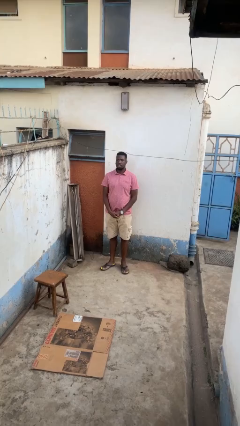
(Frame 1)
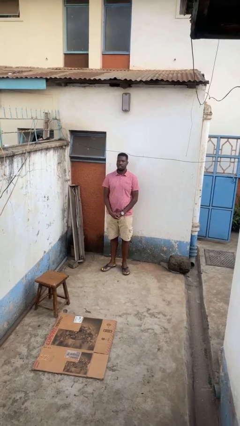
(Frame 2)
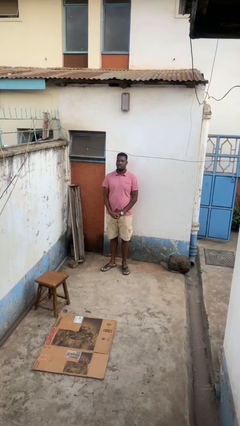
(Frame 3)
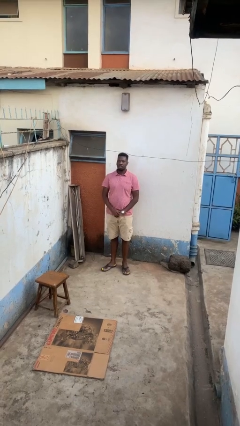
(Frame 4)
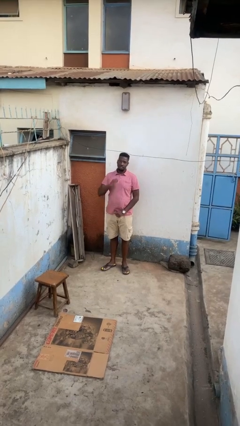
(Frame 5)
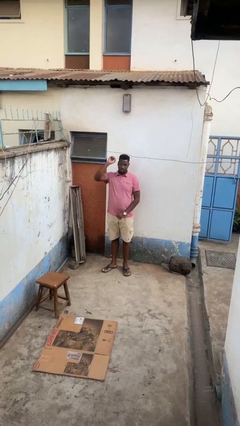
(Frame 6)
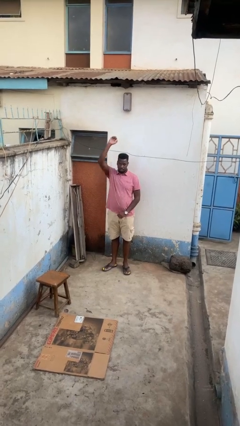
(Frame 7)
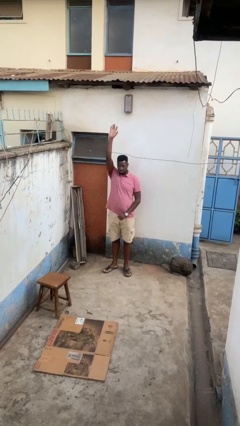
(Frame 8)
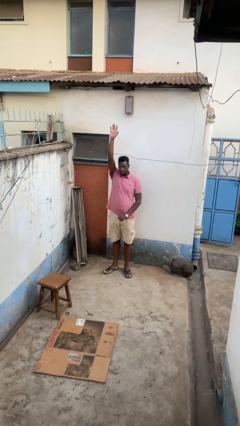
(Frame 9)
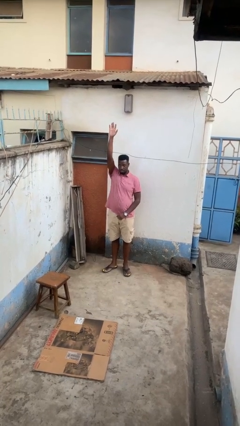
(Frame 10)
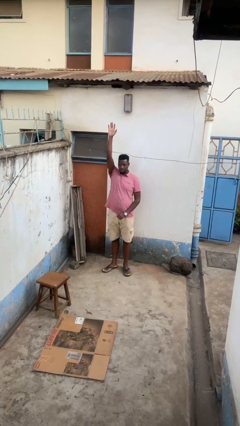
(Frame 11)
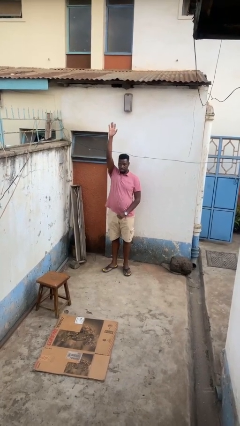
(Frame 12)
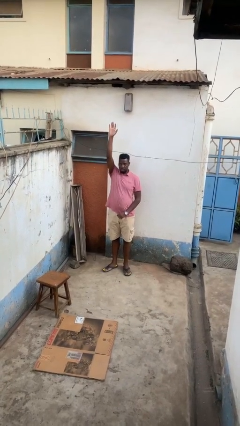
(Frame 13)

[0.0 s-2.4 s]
person gestures raise hand

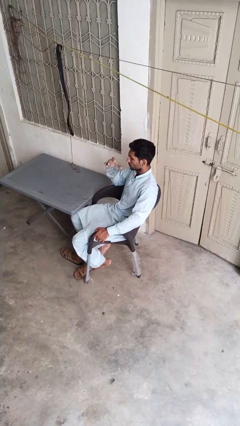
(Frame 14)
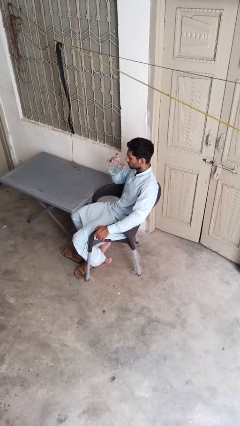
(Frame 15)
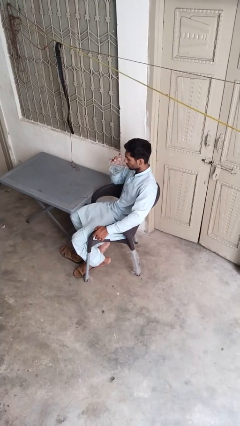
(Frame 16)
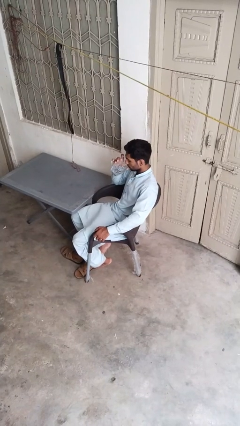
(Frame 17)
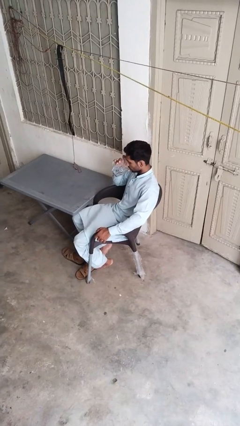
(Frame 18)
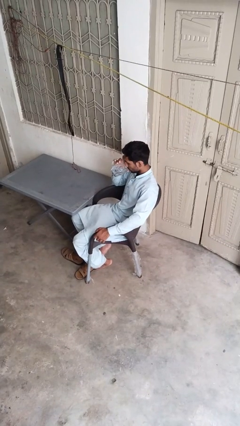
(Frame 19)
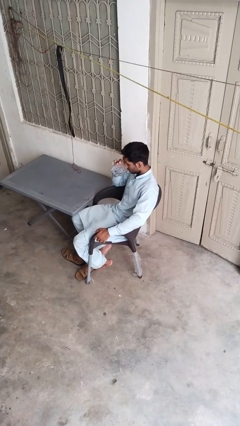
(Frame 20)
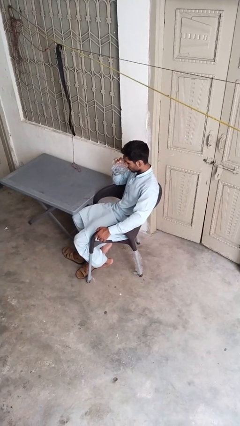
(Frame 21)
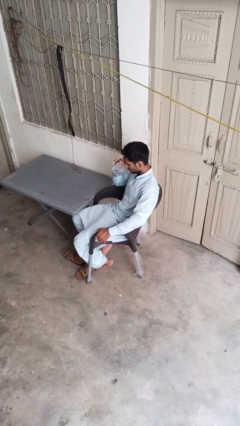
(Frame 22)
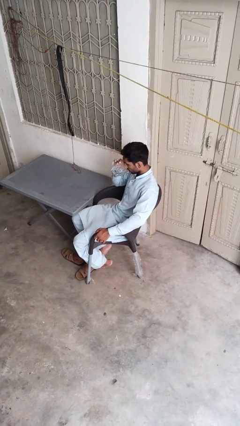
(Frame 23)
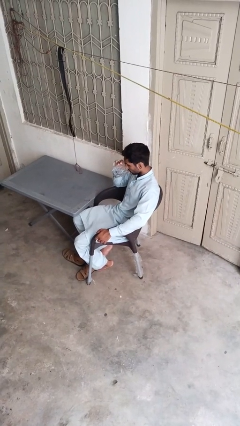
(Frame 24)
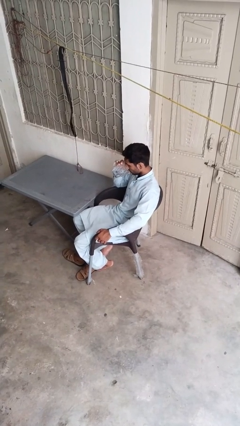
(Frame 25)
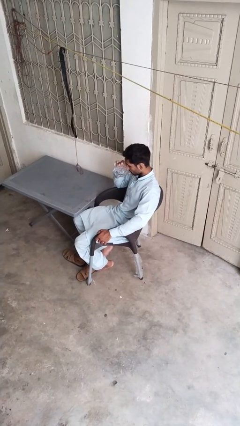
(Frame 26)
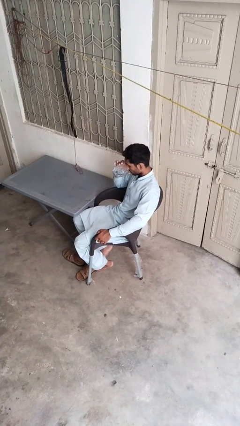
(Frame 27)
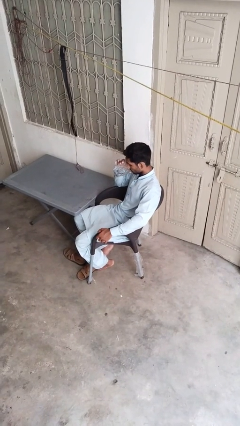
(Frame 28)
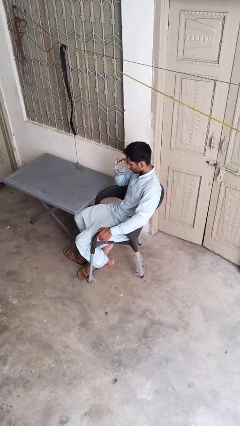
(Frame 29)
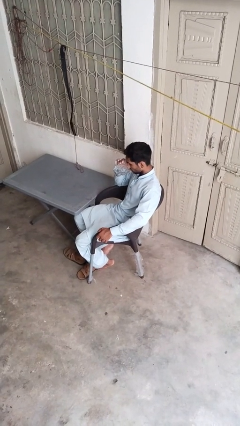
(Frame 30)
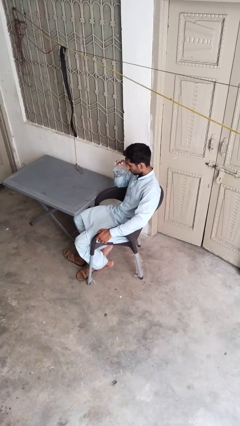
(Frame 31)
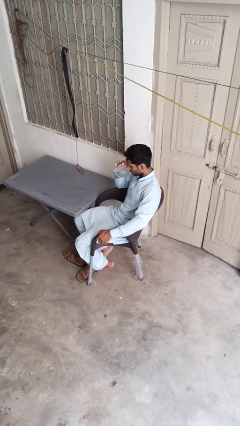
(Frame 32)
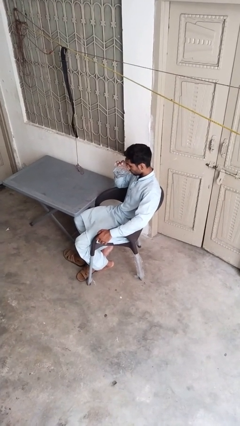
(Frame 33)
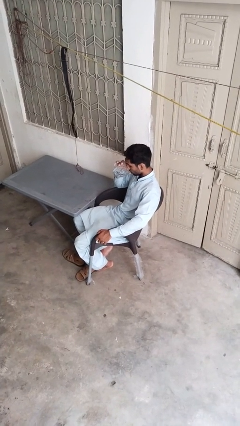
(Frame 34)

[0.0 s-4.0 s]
person drinks from mug

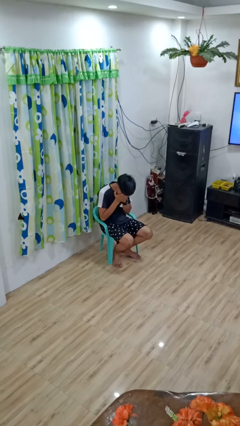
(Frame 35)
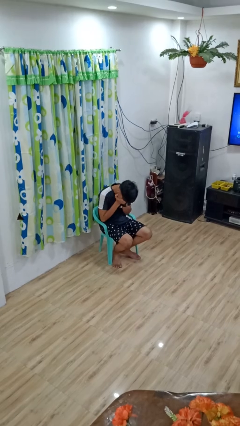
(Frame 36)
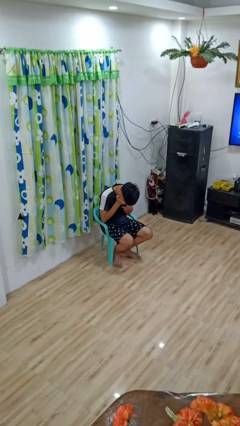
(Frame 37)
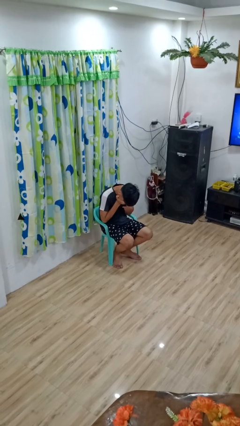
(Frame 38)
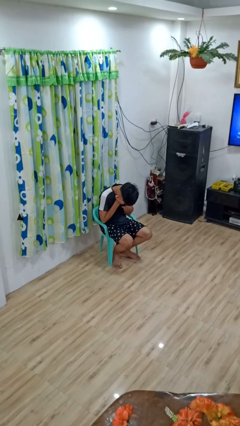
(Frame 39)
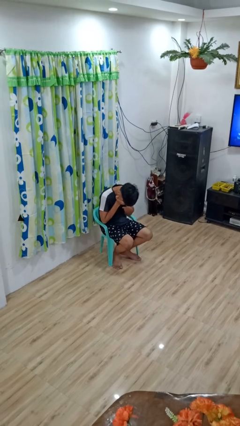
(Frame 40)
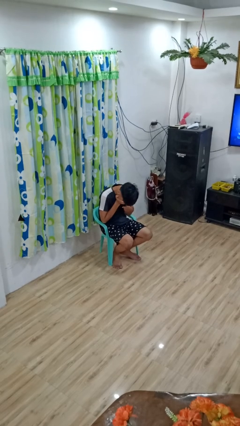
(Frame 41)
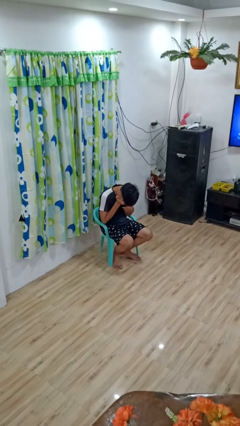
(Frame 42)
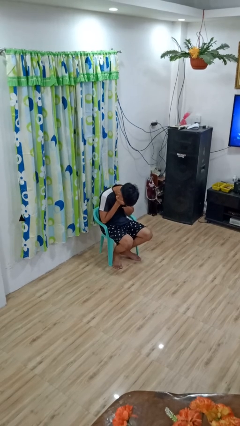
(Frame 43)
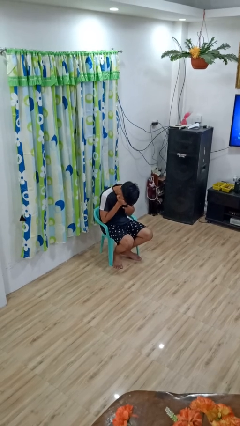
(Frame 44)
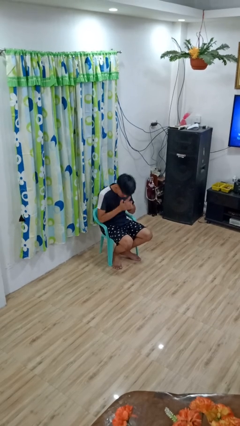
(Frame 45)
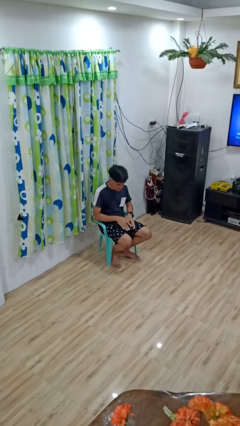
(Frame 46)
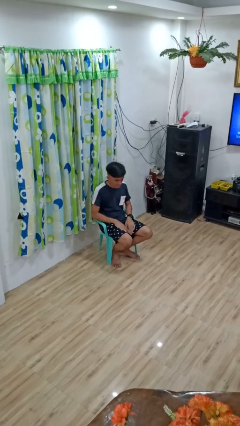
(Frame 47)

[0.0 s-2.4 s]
person covers face with hands

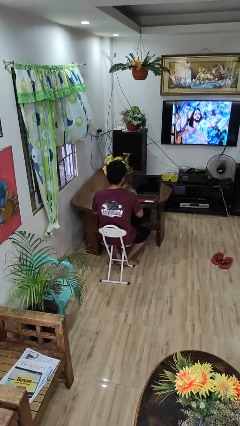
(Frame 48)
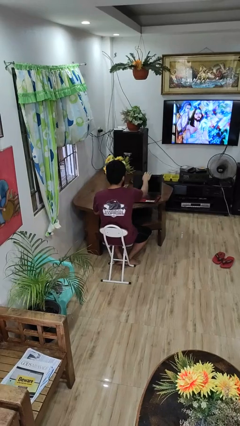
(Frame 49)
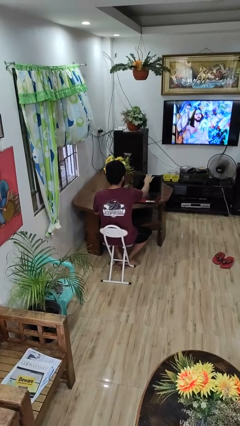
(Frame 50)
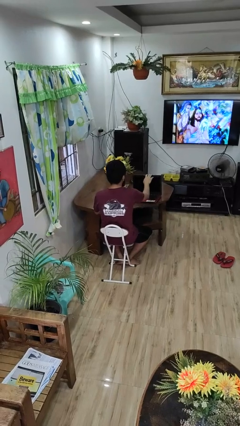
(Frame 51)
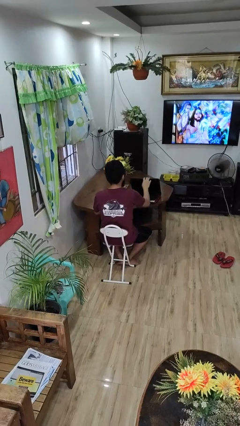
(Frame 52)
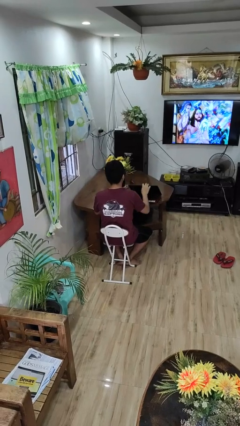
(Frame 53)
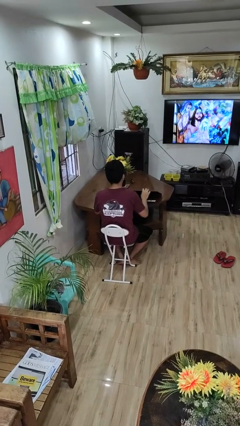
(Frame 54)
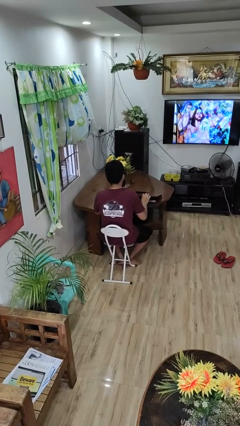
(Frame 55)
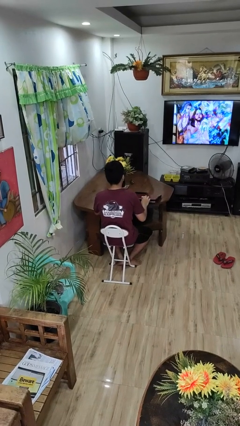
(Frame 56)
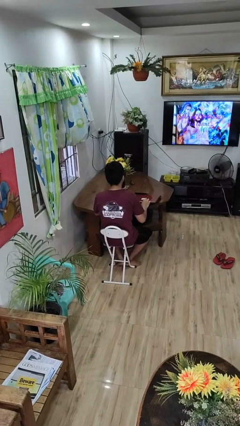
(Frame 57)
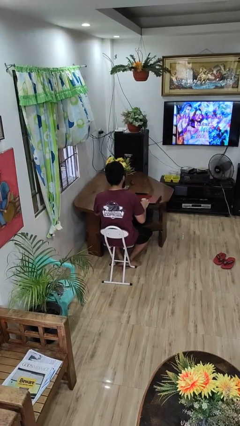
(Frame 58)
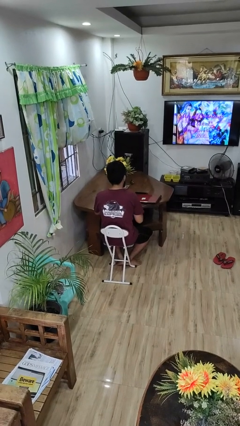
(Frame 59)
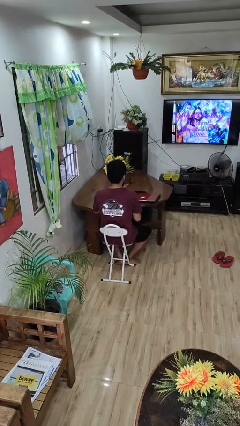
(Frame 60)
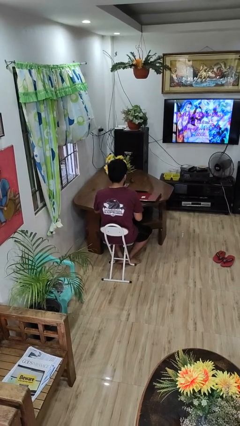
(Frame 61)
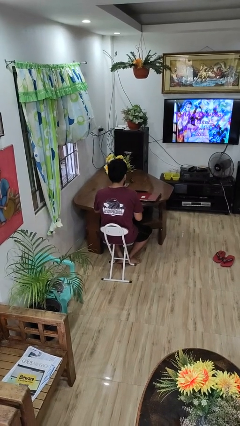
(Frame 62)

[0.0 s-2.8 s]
person closes laptop

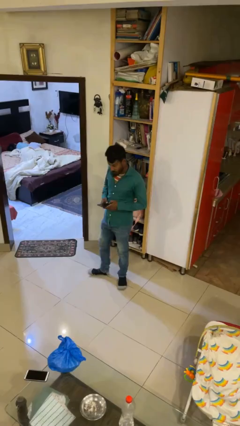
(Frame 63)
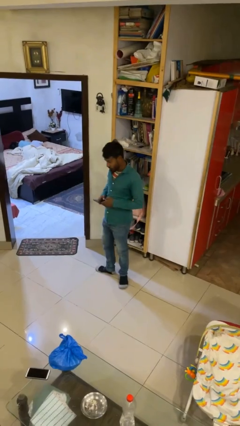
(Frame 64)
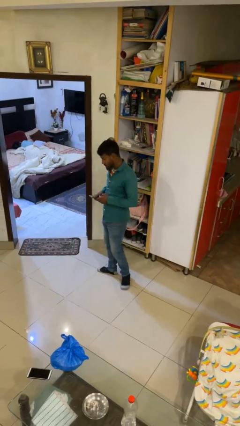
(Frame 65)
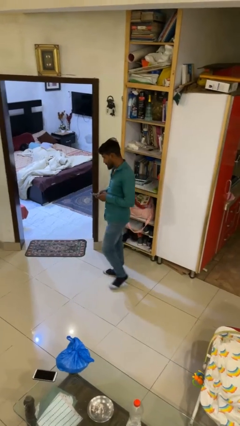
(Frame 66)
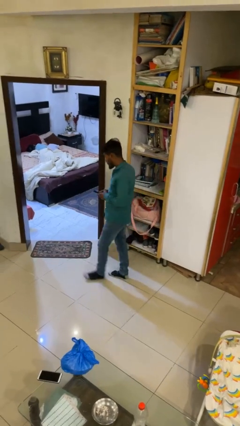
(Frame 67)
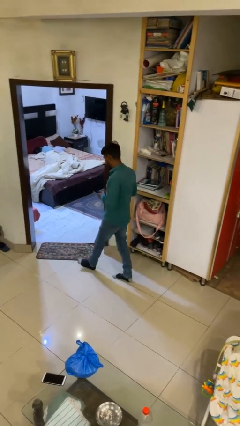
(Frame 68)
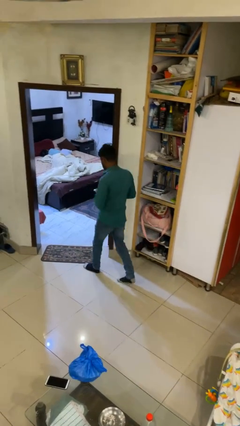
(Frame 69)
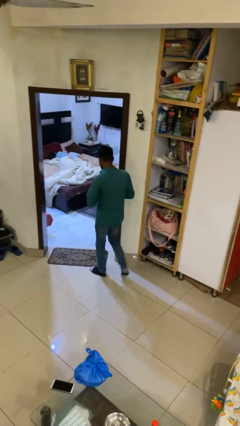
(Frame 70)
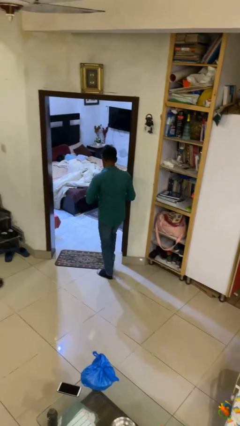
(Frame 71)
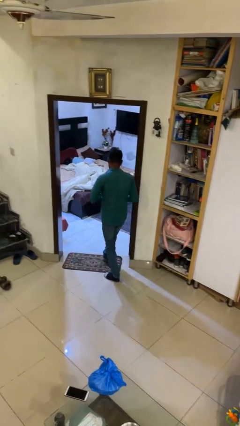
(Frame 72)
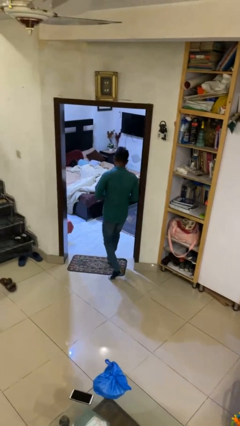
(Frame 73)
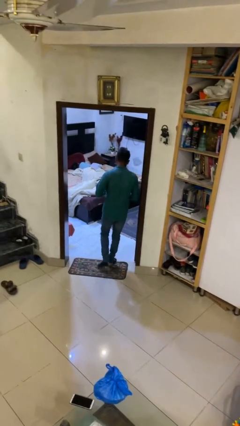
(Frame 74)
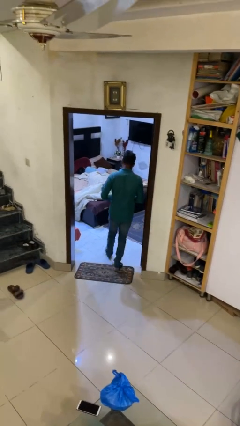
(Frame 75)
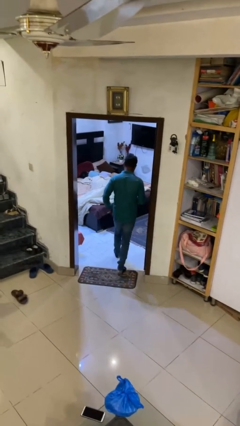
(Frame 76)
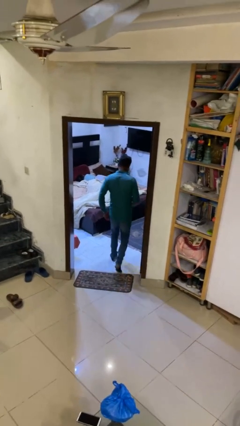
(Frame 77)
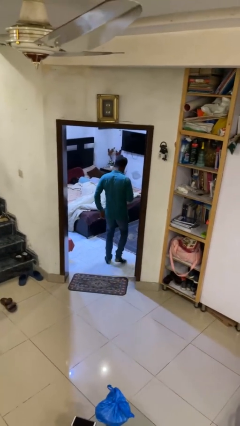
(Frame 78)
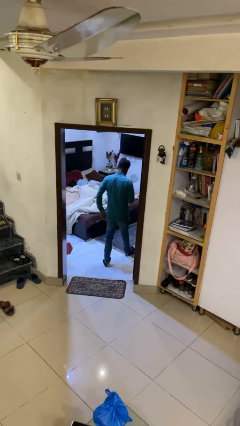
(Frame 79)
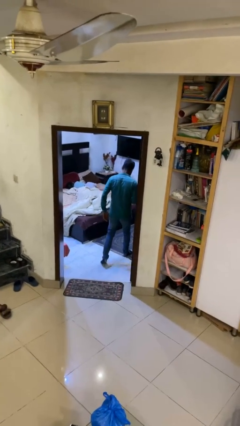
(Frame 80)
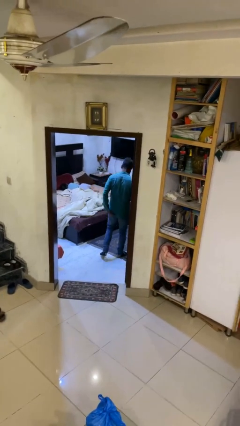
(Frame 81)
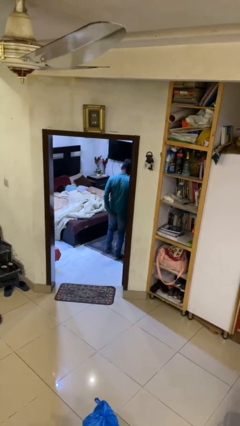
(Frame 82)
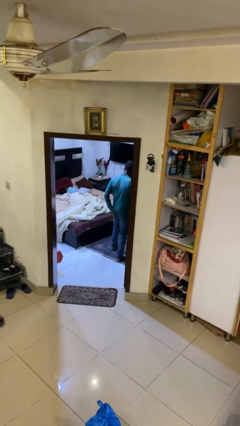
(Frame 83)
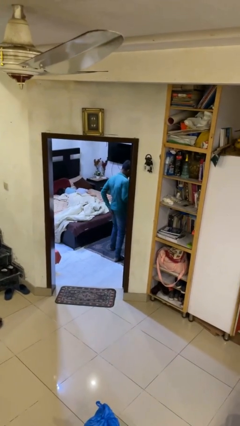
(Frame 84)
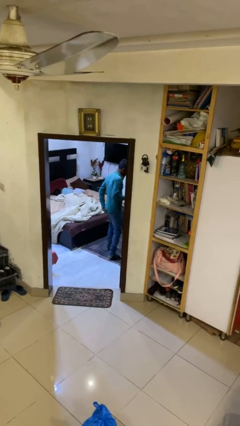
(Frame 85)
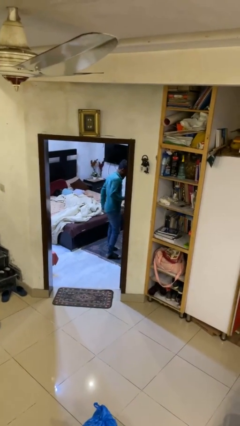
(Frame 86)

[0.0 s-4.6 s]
person exits scene through structure

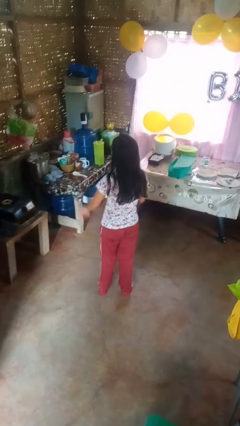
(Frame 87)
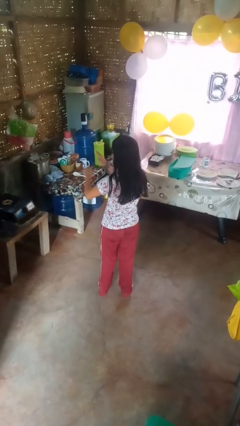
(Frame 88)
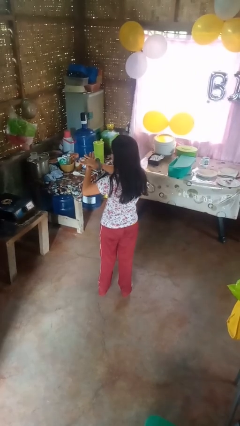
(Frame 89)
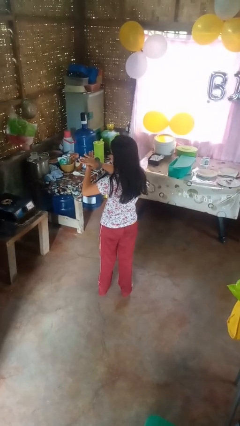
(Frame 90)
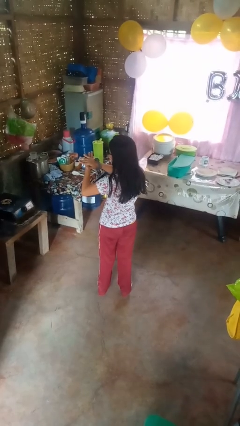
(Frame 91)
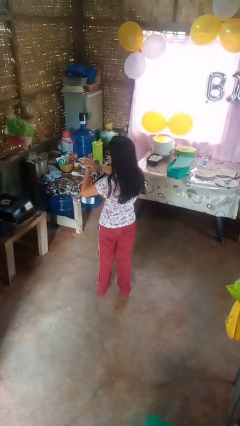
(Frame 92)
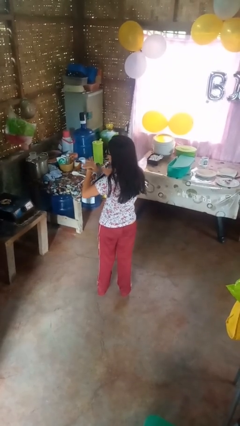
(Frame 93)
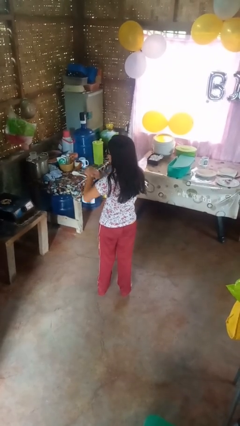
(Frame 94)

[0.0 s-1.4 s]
person swats bug
